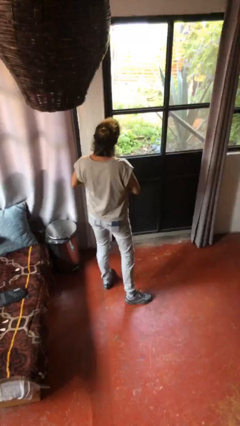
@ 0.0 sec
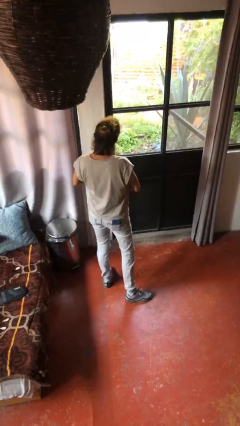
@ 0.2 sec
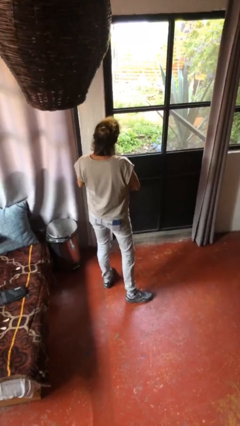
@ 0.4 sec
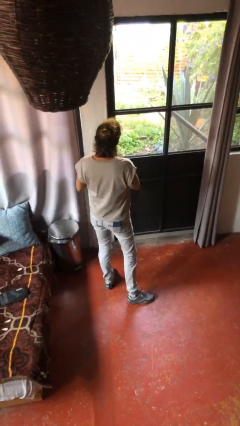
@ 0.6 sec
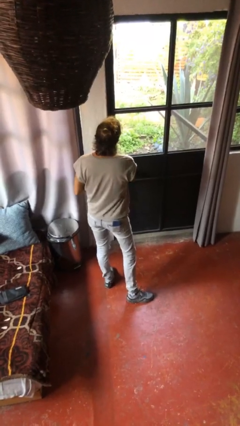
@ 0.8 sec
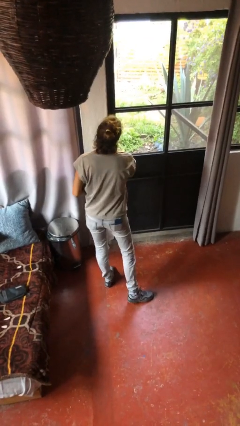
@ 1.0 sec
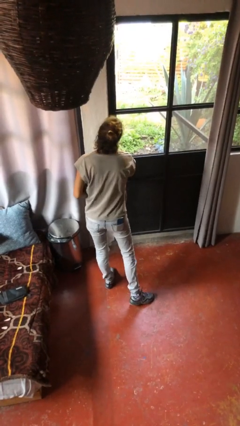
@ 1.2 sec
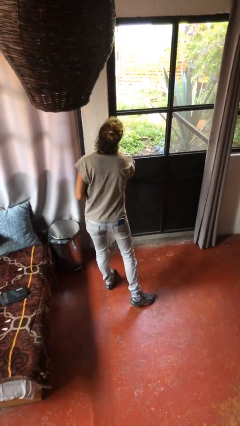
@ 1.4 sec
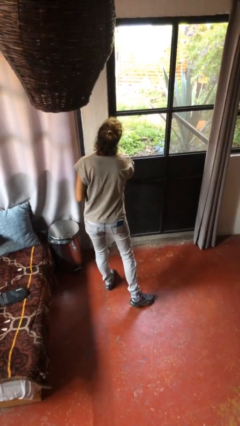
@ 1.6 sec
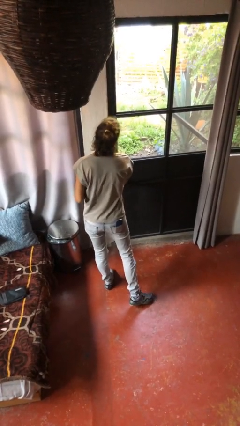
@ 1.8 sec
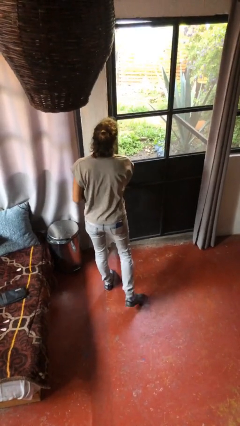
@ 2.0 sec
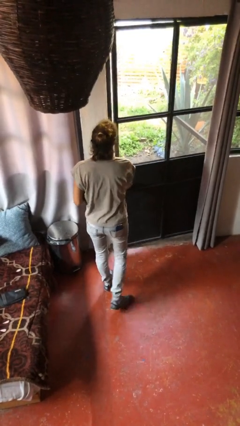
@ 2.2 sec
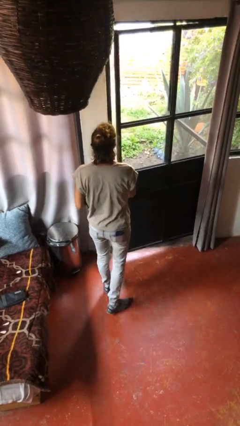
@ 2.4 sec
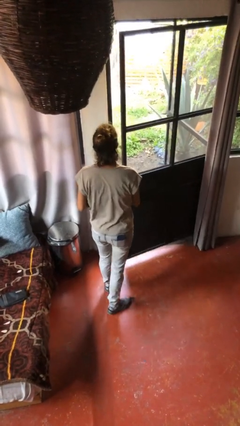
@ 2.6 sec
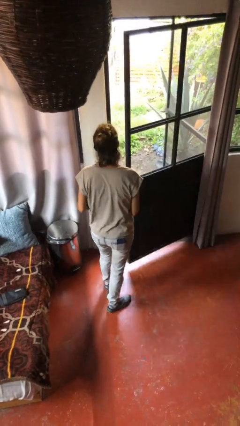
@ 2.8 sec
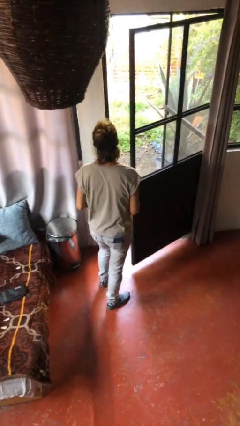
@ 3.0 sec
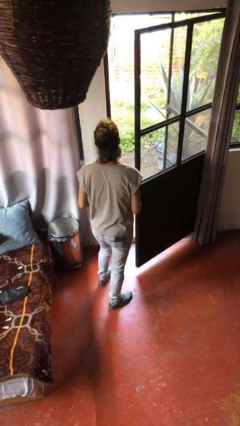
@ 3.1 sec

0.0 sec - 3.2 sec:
person opens facility door

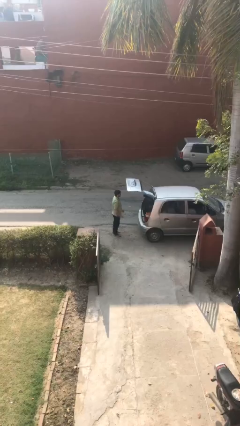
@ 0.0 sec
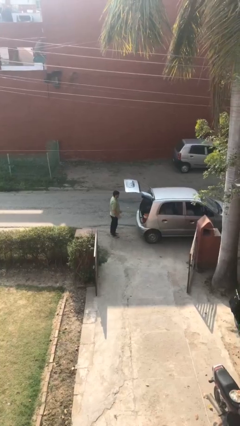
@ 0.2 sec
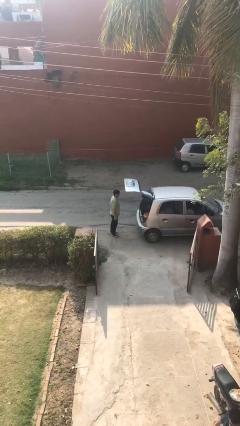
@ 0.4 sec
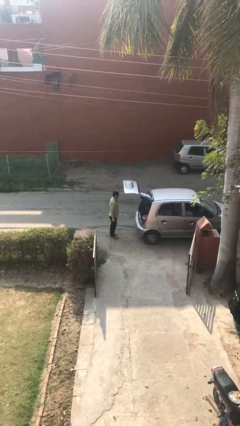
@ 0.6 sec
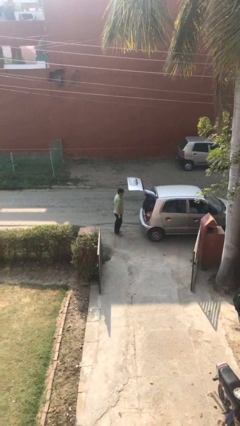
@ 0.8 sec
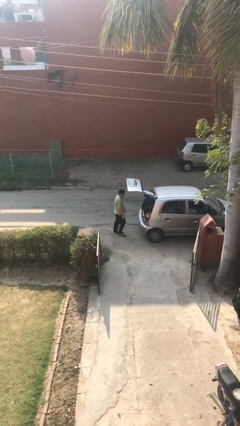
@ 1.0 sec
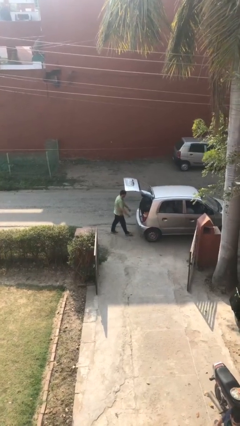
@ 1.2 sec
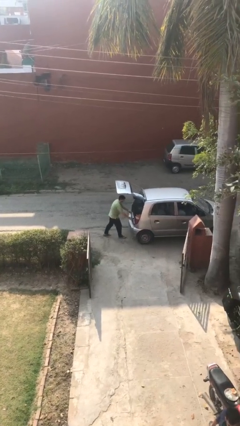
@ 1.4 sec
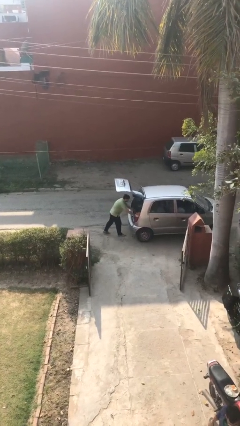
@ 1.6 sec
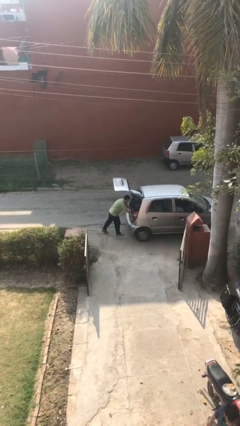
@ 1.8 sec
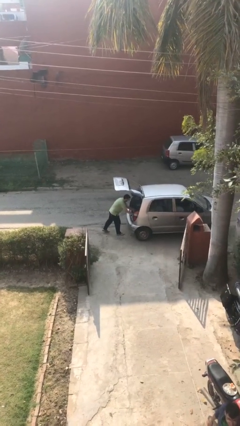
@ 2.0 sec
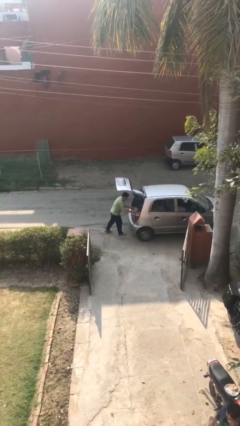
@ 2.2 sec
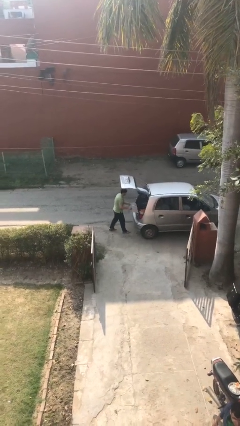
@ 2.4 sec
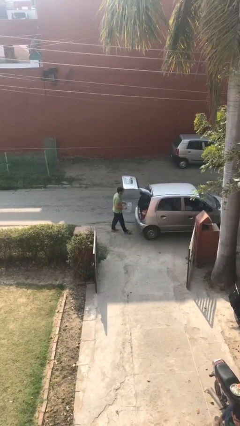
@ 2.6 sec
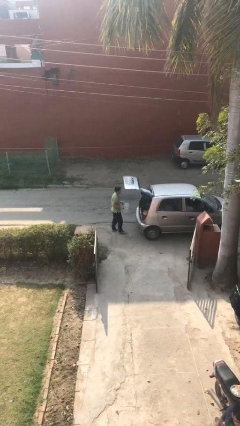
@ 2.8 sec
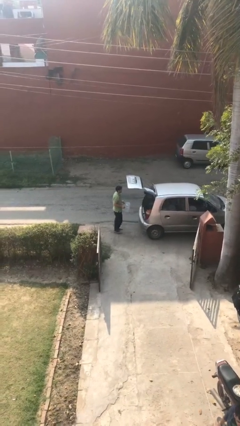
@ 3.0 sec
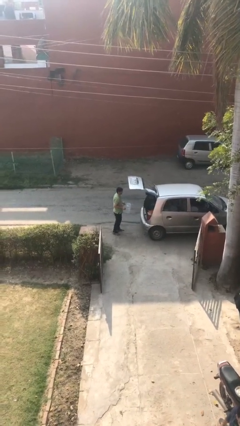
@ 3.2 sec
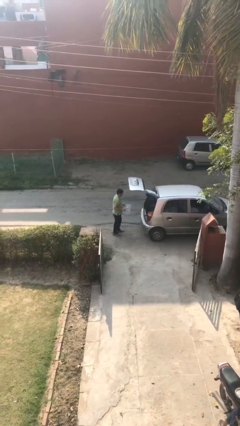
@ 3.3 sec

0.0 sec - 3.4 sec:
person unloads car

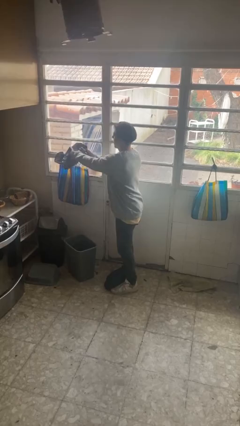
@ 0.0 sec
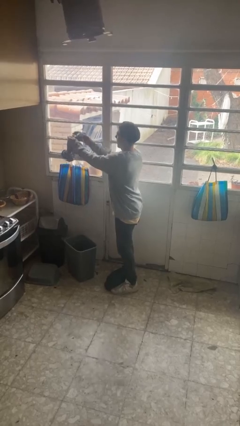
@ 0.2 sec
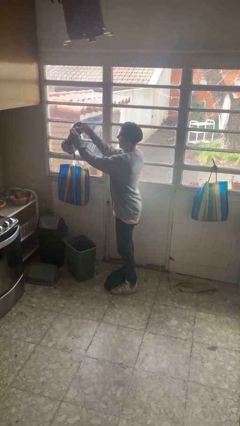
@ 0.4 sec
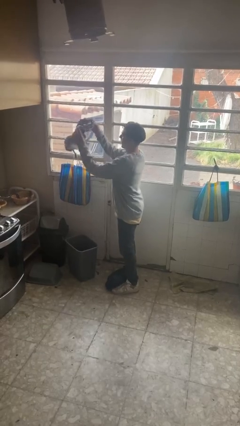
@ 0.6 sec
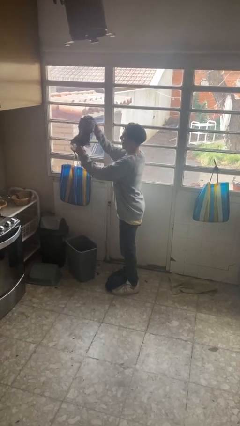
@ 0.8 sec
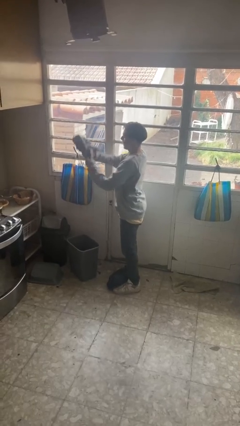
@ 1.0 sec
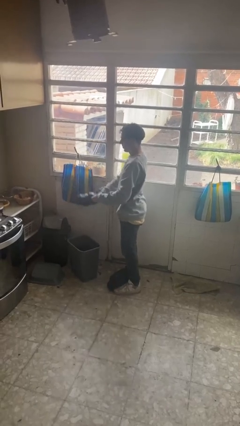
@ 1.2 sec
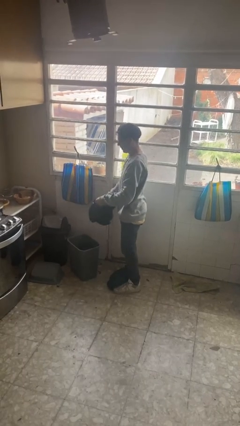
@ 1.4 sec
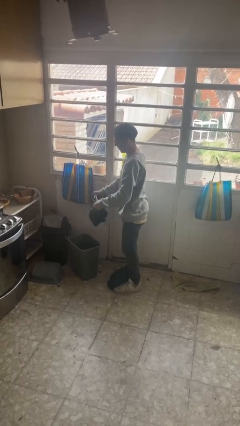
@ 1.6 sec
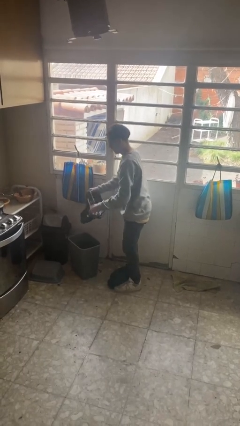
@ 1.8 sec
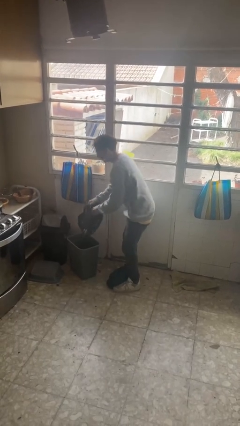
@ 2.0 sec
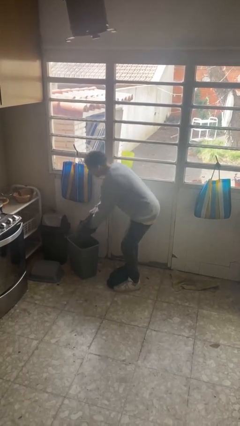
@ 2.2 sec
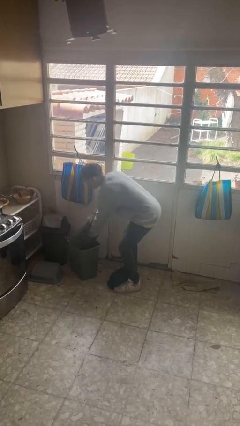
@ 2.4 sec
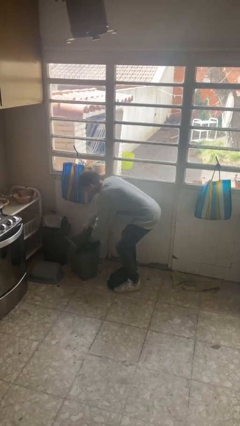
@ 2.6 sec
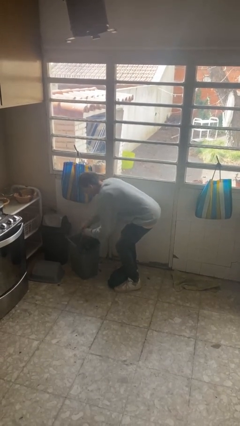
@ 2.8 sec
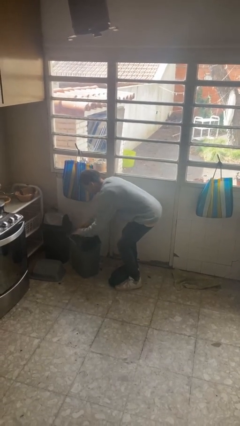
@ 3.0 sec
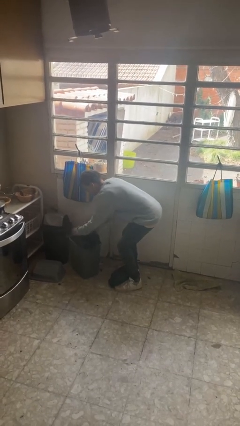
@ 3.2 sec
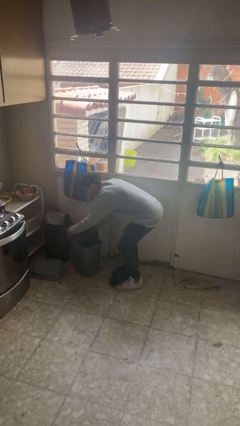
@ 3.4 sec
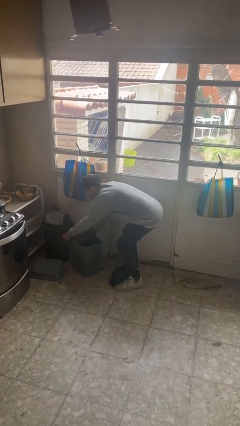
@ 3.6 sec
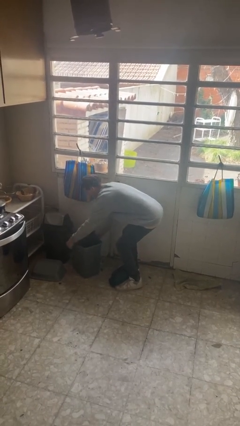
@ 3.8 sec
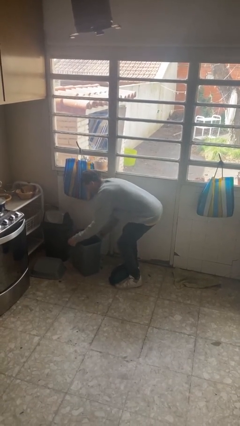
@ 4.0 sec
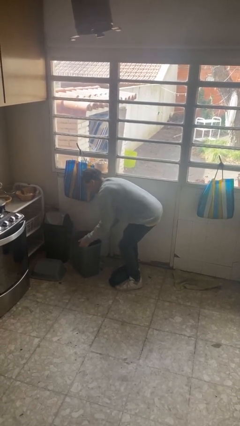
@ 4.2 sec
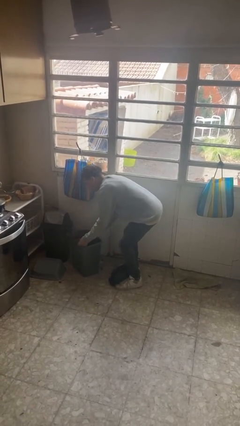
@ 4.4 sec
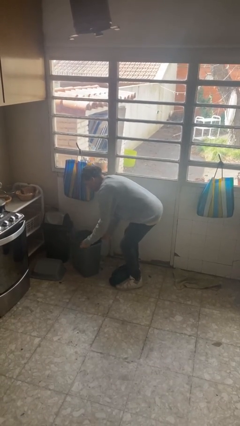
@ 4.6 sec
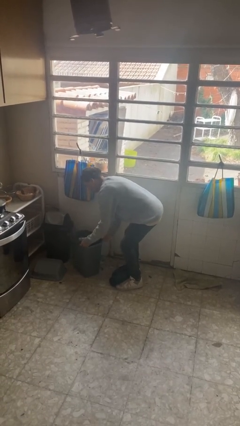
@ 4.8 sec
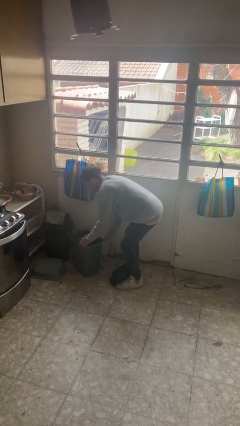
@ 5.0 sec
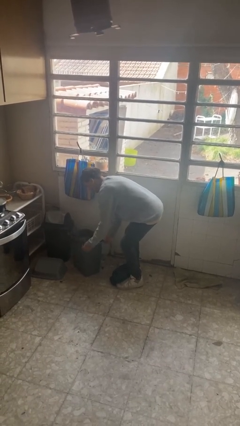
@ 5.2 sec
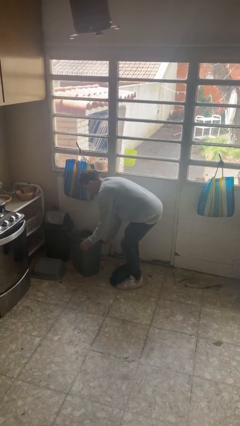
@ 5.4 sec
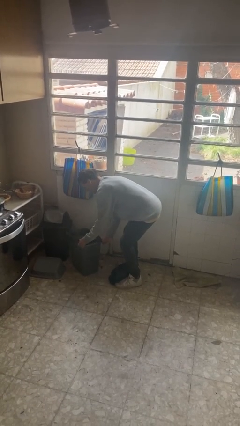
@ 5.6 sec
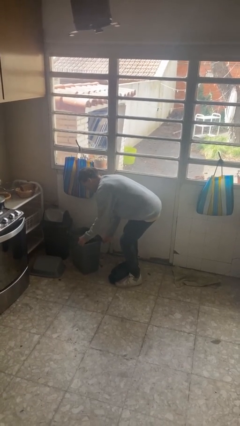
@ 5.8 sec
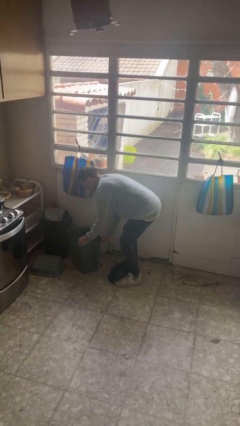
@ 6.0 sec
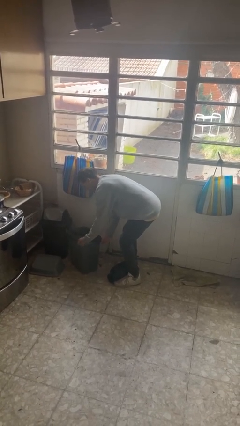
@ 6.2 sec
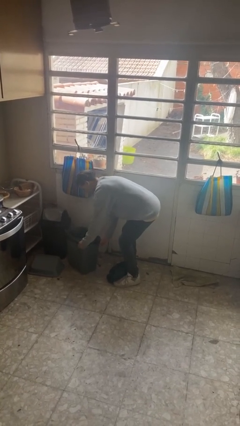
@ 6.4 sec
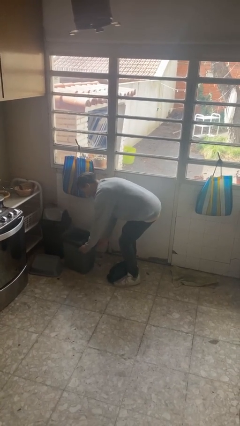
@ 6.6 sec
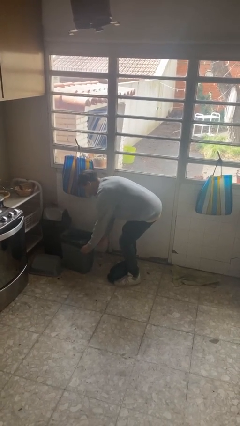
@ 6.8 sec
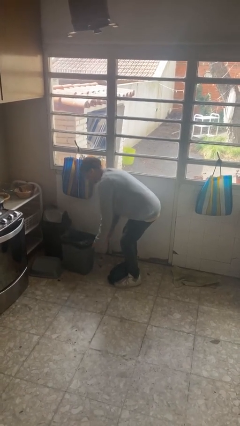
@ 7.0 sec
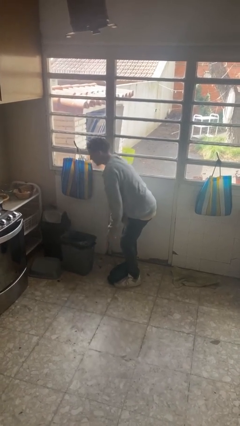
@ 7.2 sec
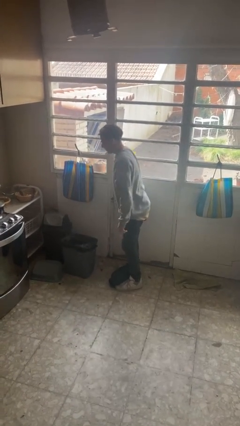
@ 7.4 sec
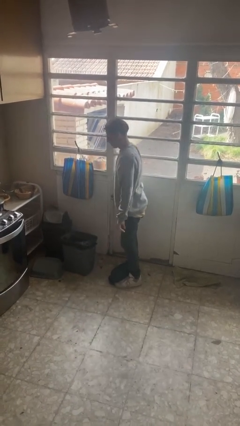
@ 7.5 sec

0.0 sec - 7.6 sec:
person inserts trashbag into trashcan

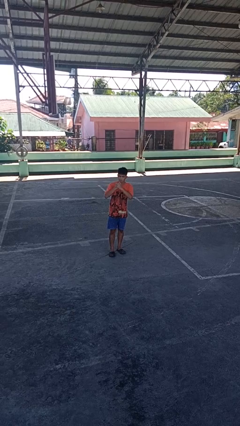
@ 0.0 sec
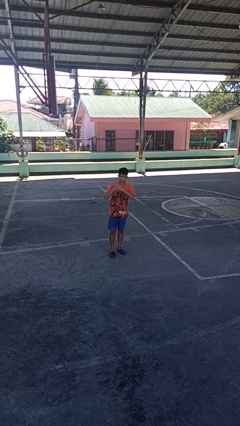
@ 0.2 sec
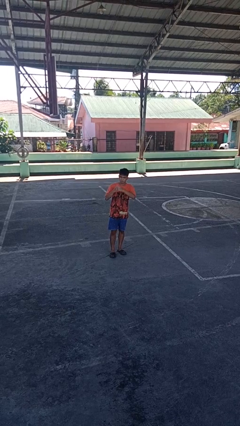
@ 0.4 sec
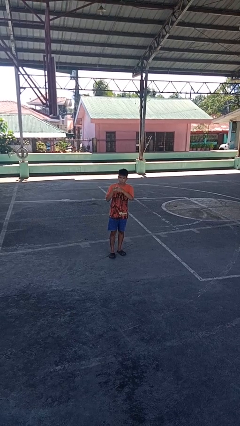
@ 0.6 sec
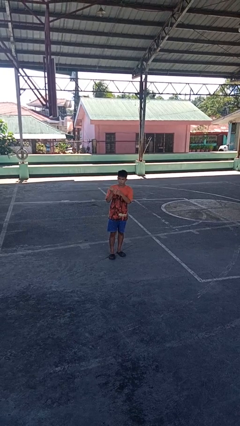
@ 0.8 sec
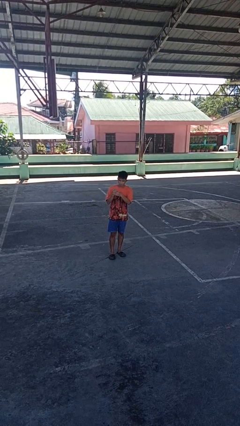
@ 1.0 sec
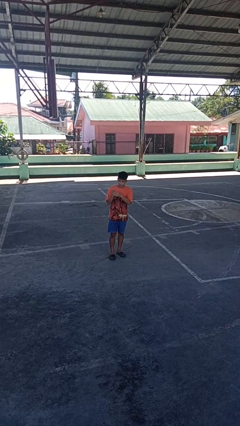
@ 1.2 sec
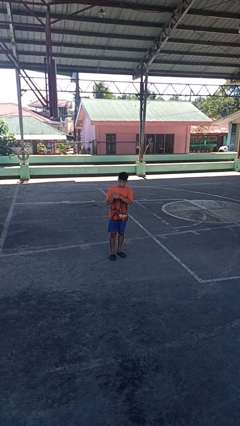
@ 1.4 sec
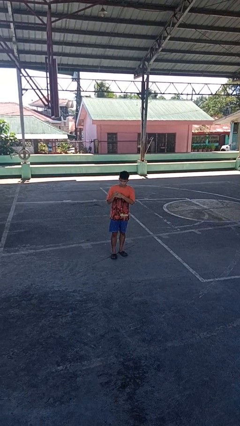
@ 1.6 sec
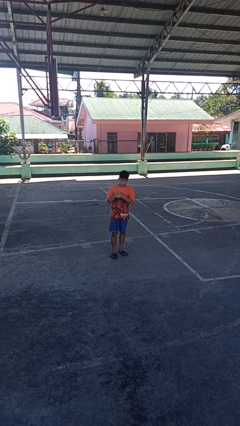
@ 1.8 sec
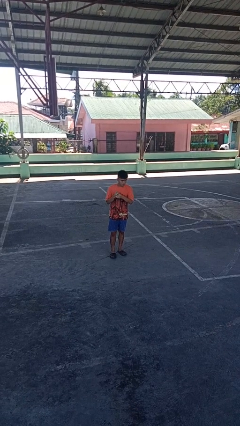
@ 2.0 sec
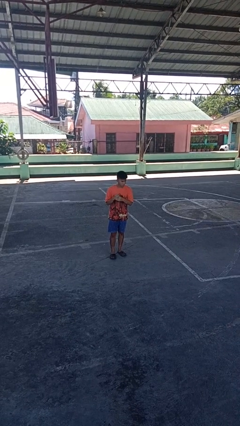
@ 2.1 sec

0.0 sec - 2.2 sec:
person cracks knuckles

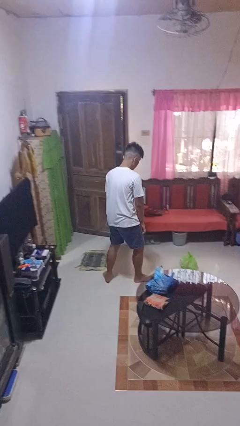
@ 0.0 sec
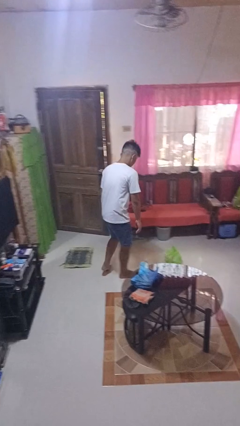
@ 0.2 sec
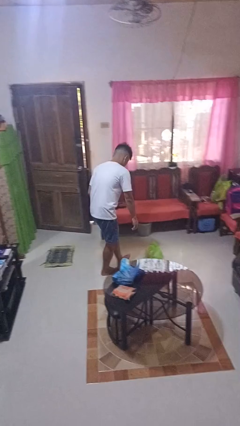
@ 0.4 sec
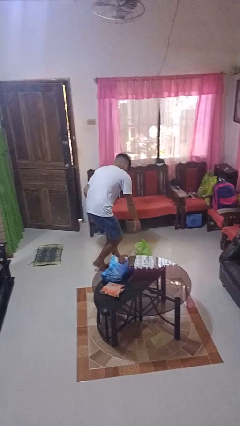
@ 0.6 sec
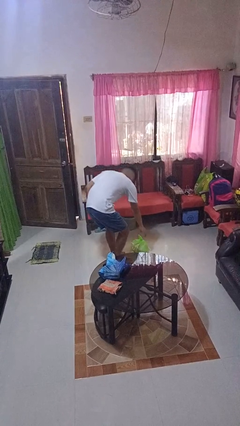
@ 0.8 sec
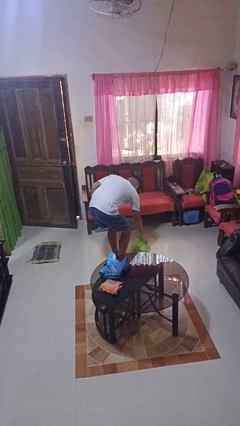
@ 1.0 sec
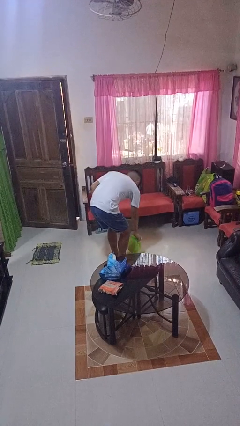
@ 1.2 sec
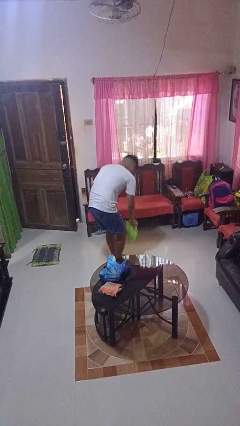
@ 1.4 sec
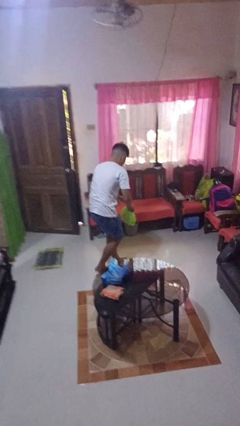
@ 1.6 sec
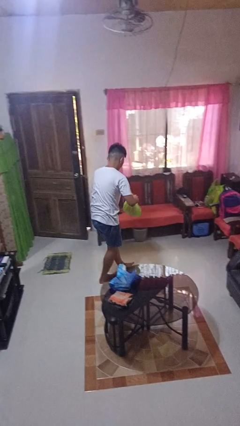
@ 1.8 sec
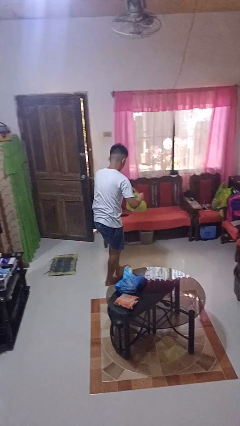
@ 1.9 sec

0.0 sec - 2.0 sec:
person picks up object from floor
